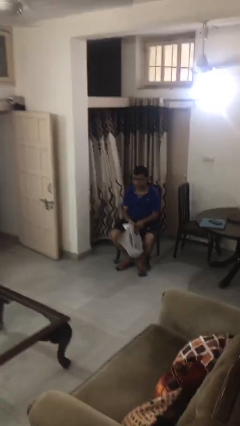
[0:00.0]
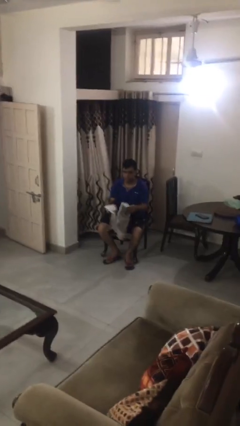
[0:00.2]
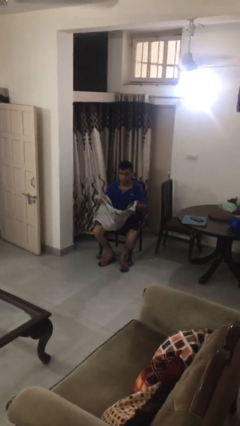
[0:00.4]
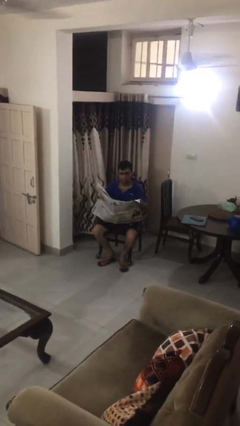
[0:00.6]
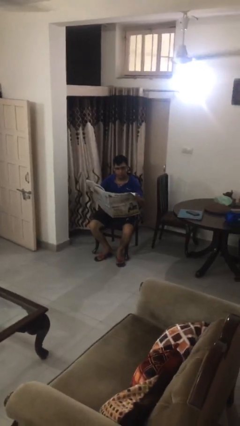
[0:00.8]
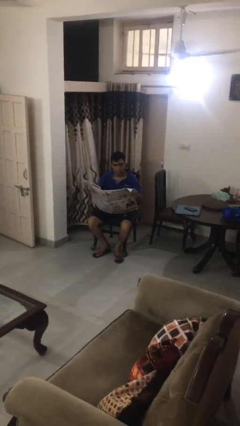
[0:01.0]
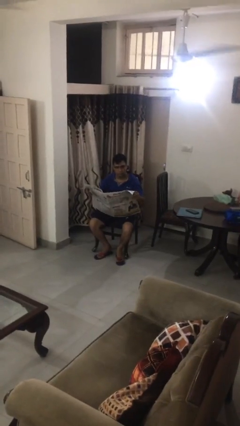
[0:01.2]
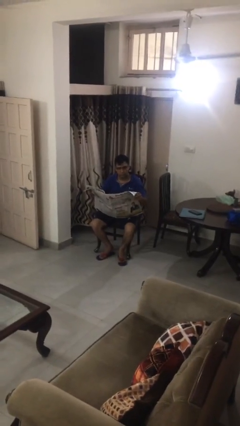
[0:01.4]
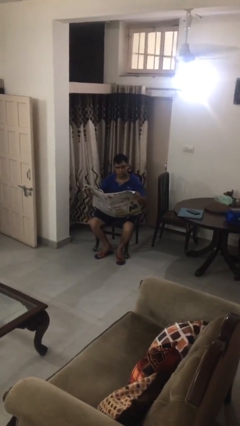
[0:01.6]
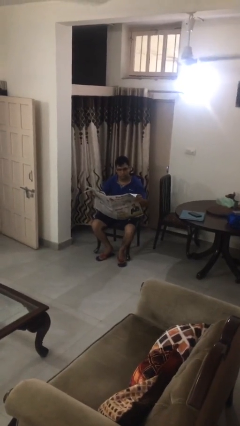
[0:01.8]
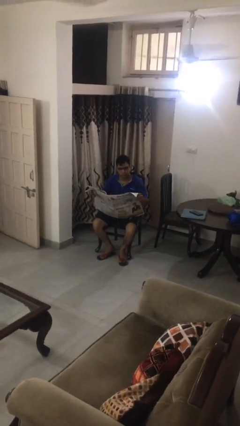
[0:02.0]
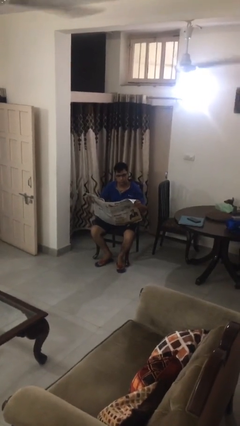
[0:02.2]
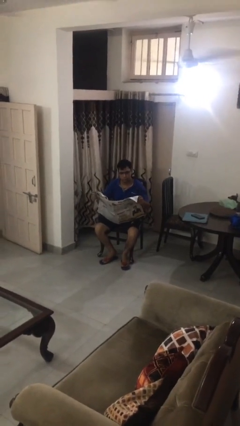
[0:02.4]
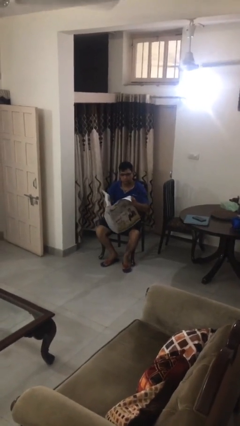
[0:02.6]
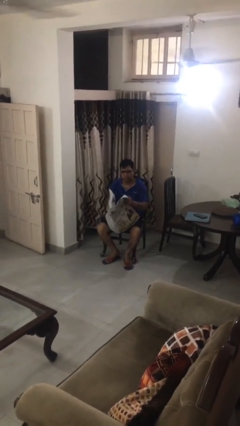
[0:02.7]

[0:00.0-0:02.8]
person reads newspaper

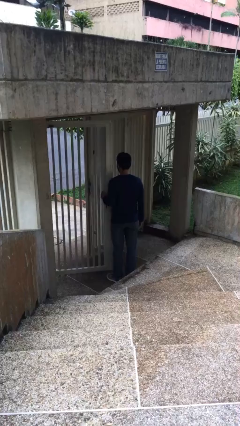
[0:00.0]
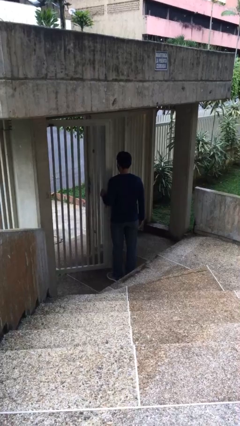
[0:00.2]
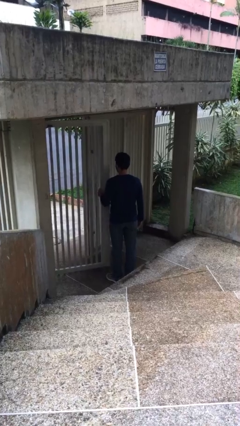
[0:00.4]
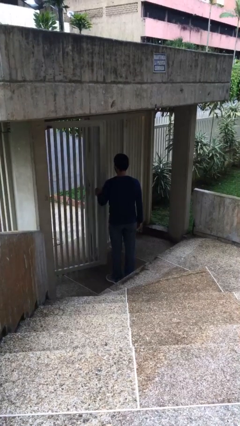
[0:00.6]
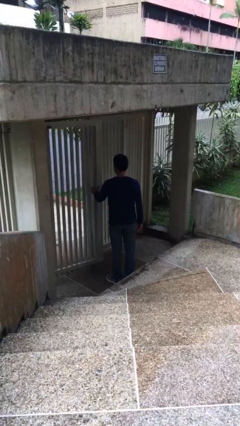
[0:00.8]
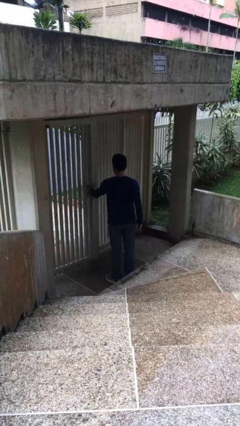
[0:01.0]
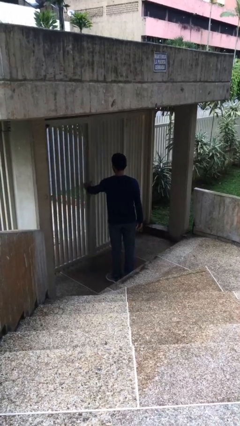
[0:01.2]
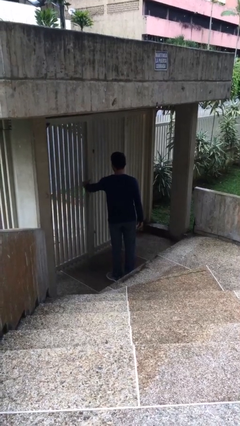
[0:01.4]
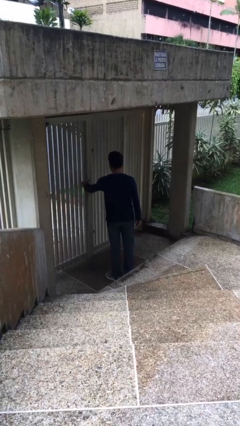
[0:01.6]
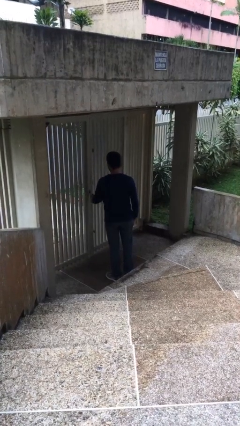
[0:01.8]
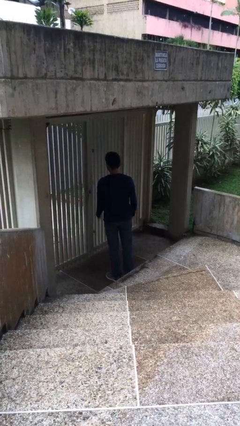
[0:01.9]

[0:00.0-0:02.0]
person closes facility door

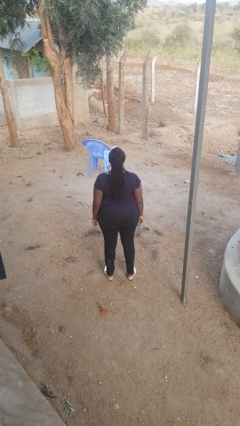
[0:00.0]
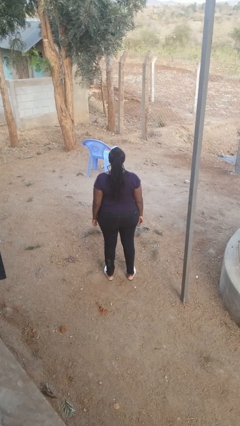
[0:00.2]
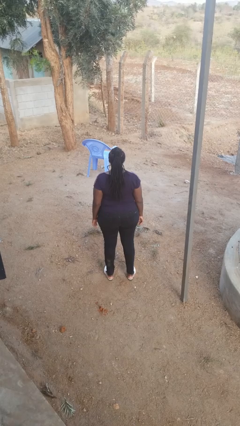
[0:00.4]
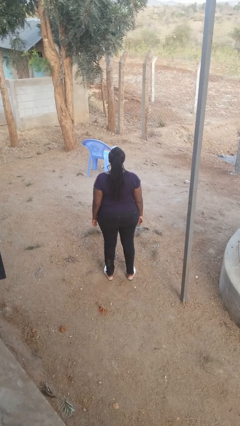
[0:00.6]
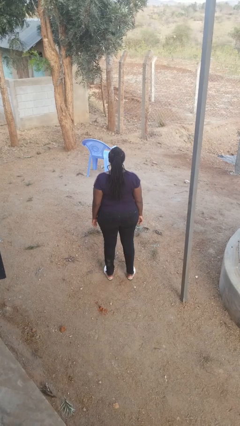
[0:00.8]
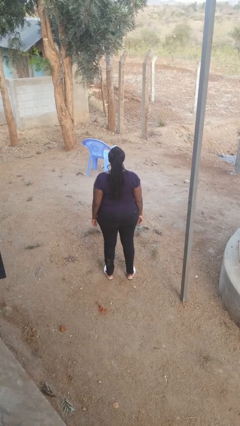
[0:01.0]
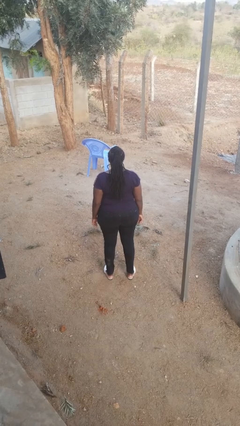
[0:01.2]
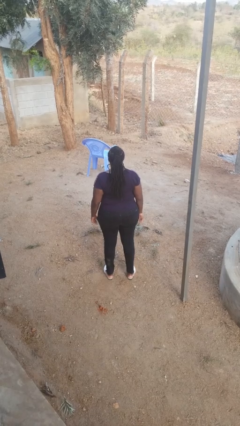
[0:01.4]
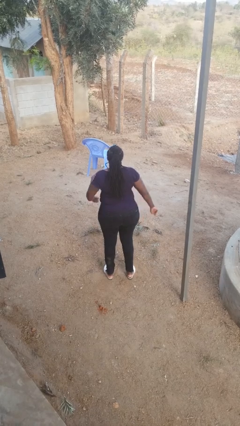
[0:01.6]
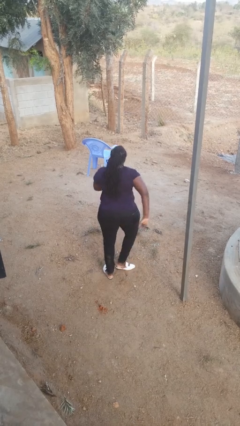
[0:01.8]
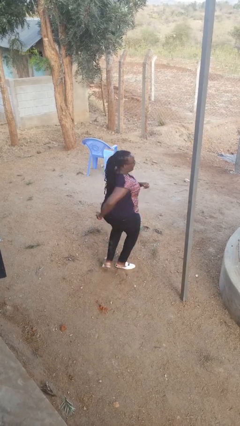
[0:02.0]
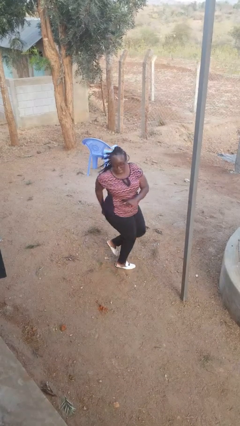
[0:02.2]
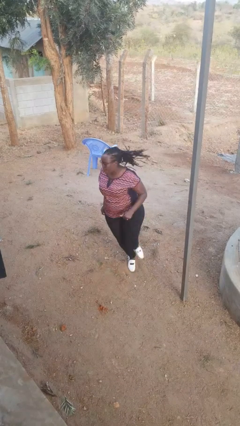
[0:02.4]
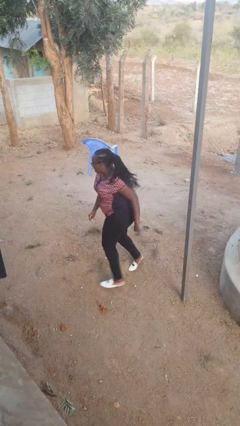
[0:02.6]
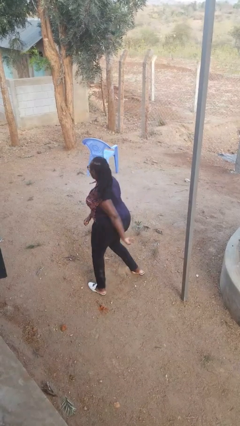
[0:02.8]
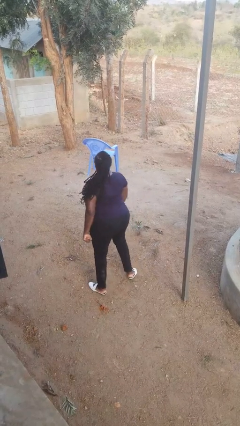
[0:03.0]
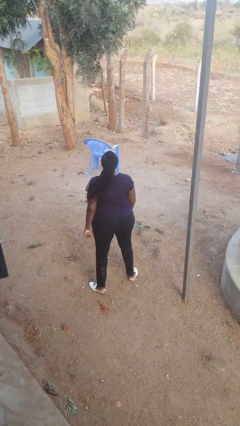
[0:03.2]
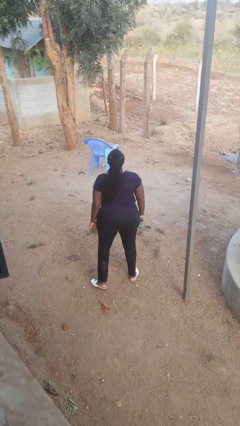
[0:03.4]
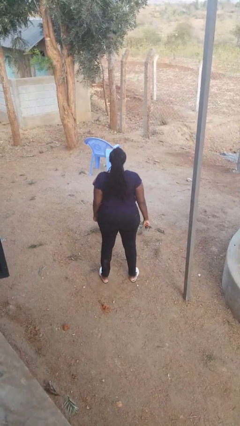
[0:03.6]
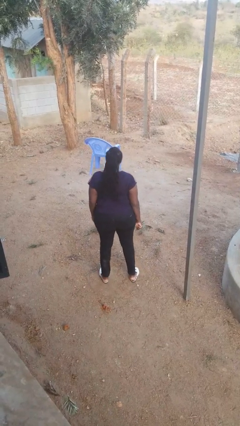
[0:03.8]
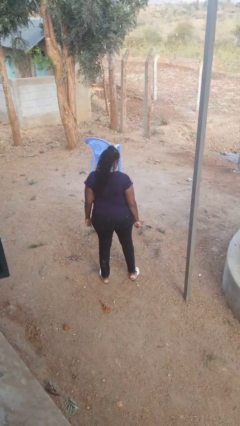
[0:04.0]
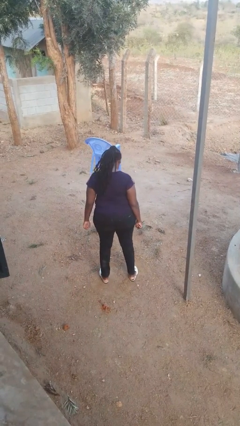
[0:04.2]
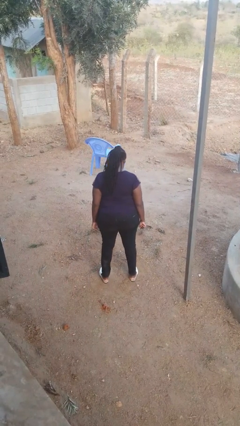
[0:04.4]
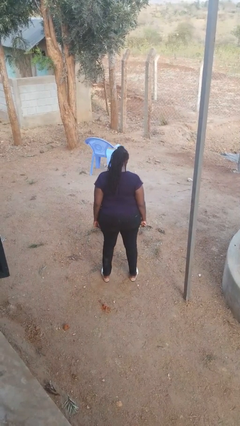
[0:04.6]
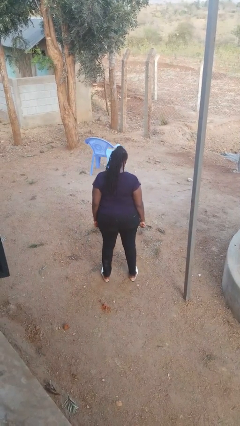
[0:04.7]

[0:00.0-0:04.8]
person twirls

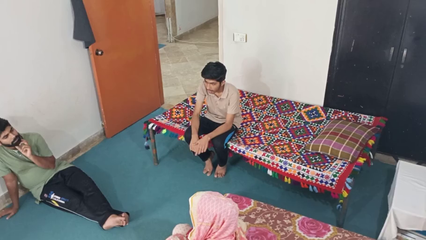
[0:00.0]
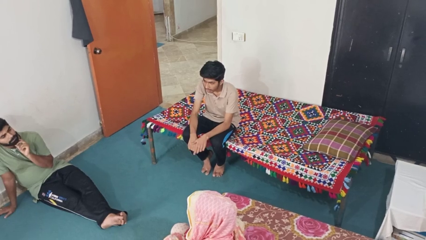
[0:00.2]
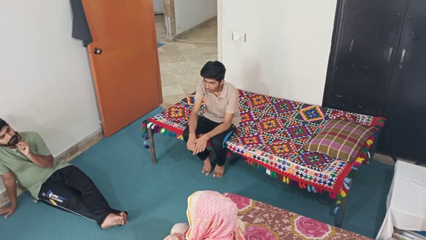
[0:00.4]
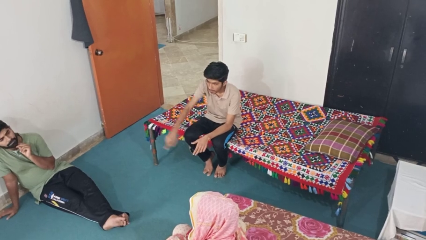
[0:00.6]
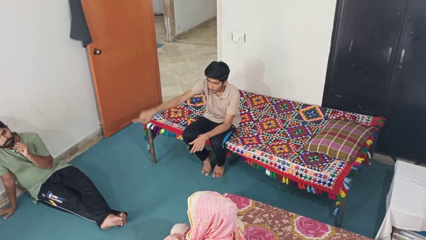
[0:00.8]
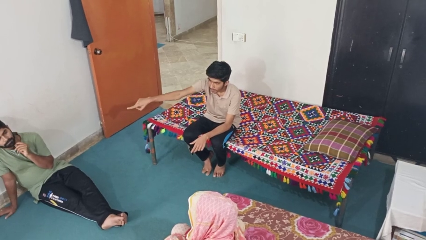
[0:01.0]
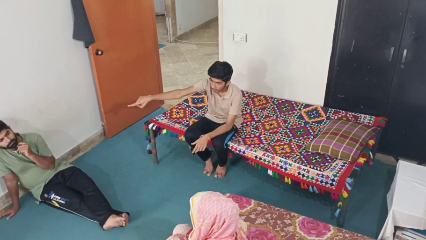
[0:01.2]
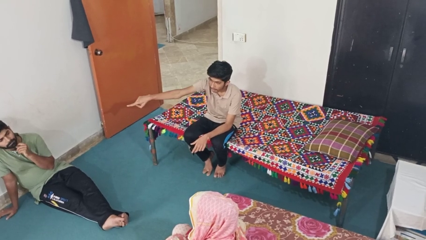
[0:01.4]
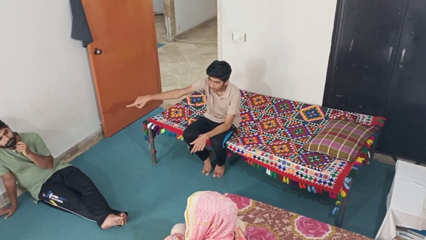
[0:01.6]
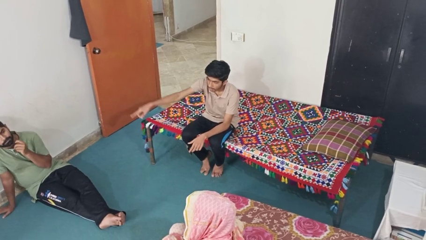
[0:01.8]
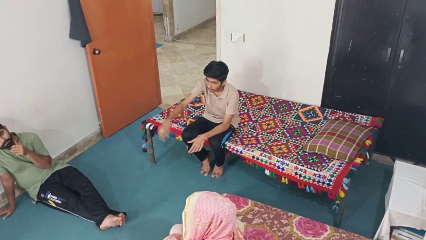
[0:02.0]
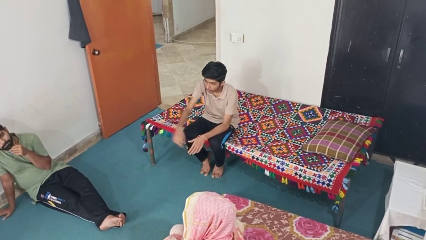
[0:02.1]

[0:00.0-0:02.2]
person points at person

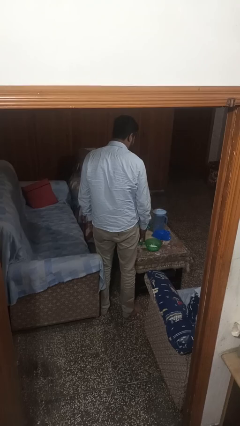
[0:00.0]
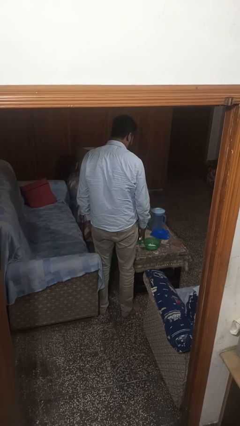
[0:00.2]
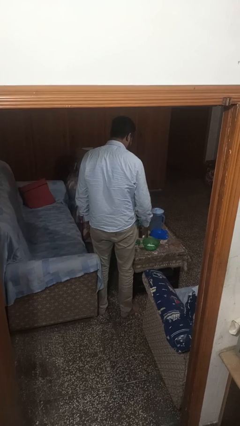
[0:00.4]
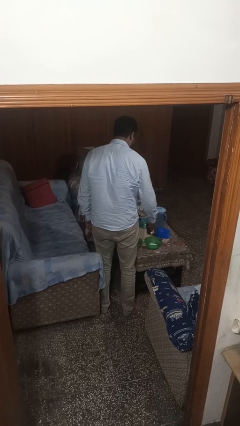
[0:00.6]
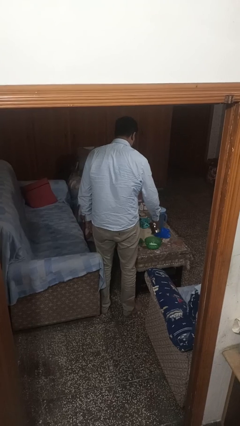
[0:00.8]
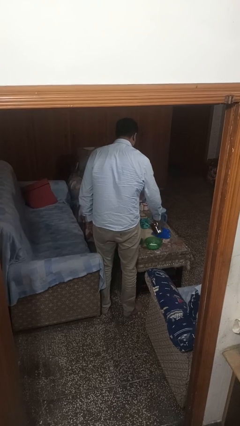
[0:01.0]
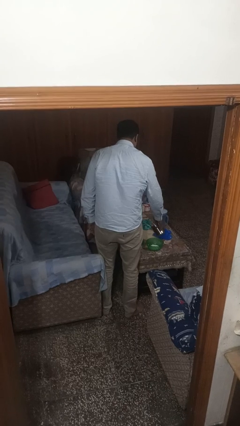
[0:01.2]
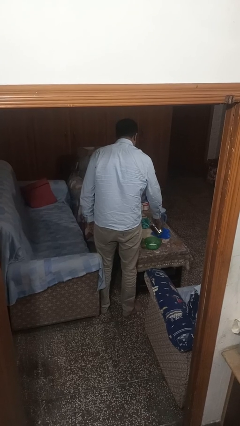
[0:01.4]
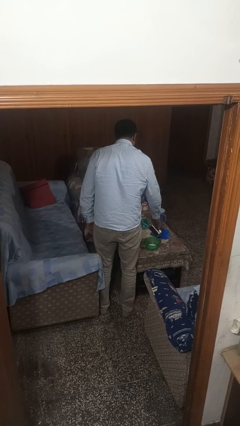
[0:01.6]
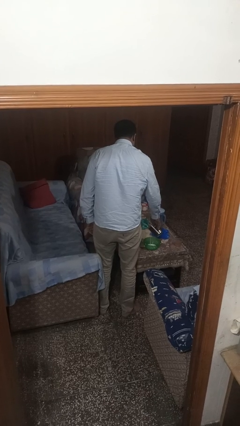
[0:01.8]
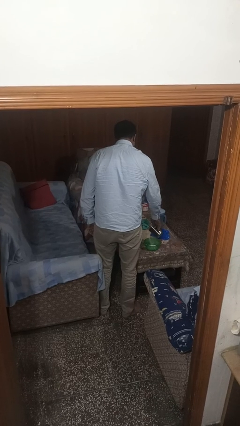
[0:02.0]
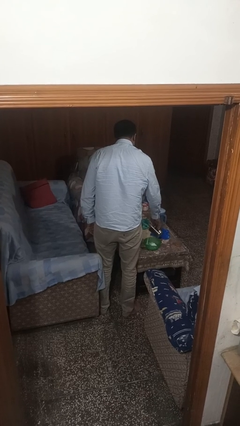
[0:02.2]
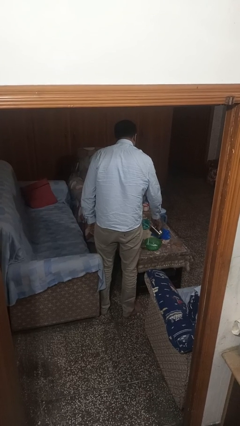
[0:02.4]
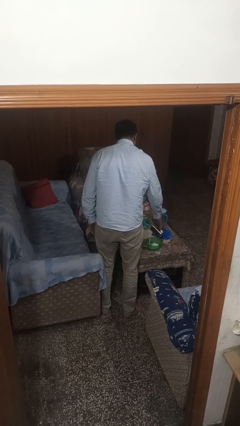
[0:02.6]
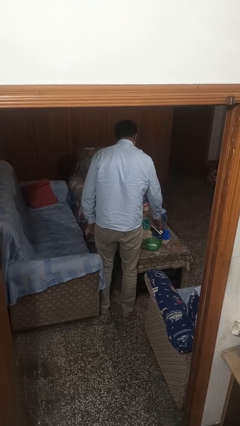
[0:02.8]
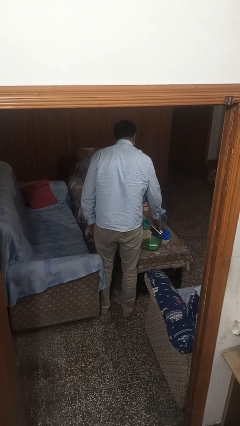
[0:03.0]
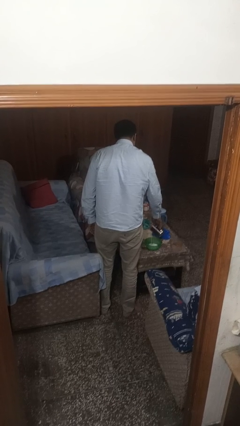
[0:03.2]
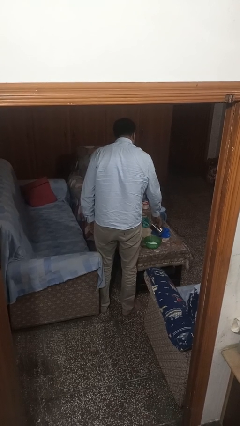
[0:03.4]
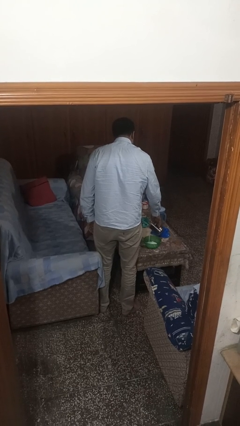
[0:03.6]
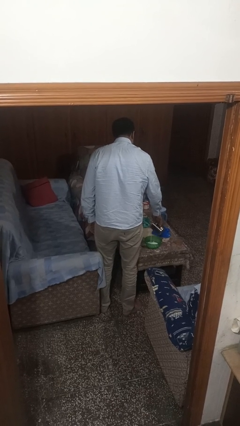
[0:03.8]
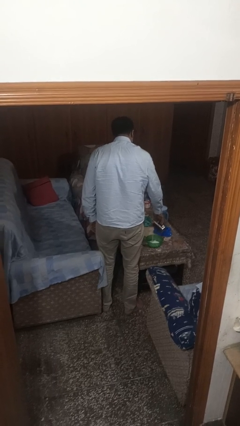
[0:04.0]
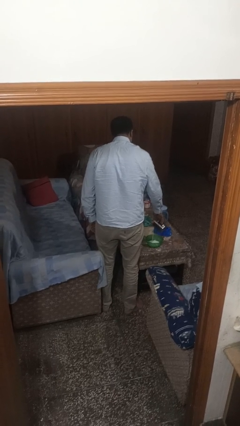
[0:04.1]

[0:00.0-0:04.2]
person pours into bowl

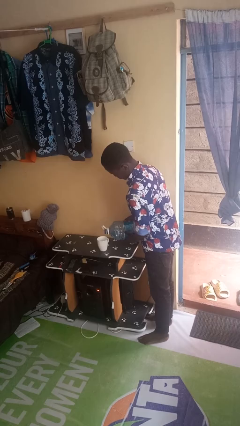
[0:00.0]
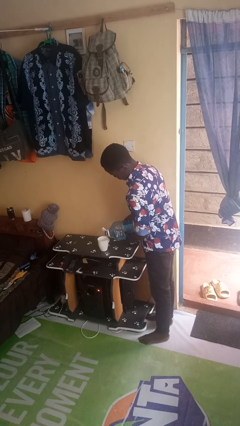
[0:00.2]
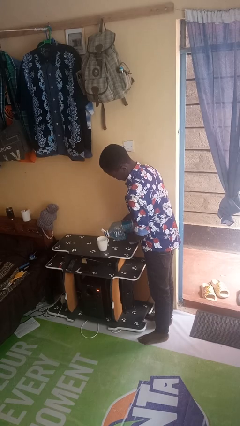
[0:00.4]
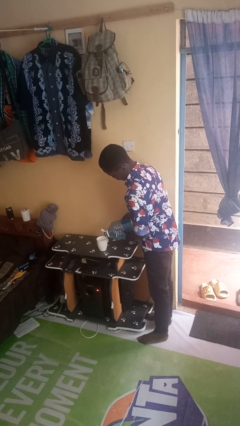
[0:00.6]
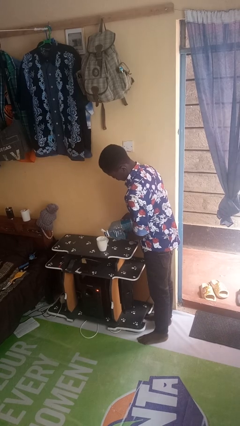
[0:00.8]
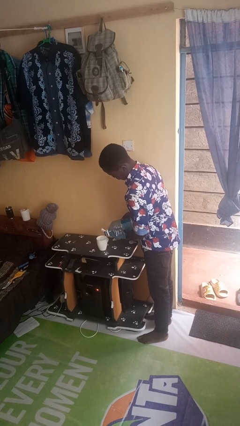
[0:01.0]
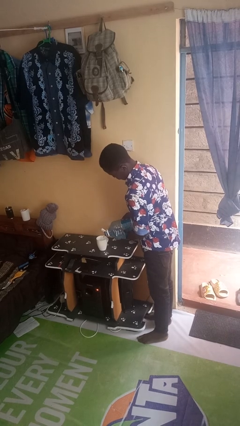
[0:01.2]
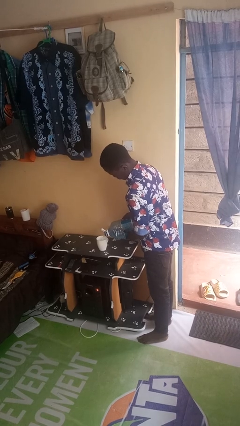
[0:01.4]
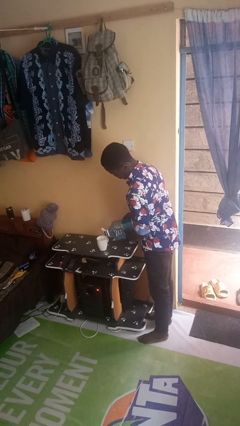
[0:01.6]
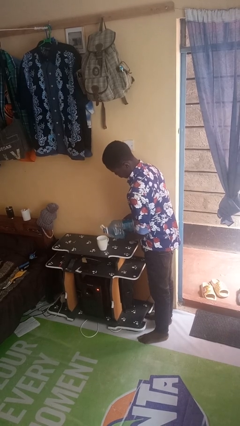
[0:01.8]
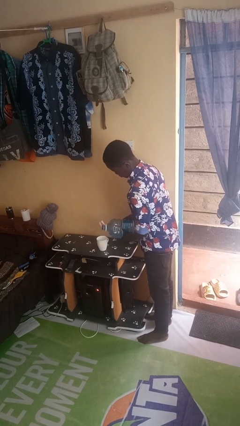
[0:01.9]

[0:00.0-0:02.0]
person pours liquid into cup
